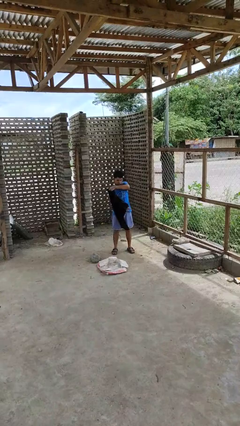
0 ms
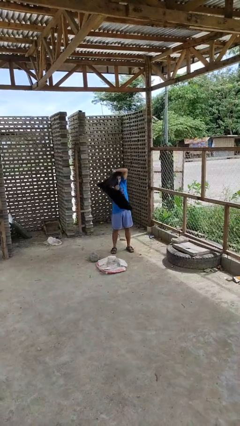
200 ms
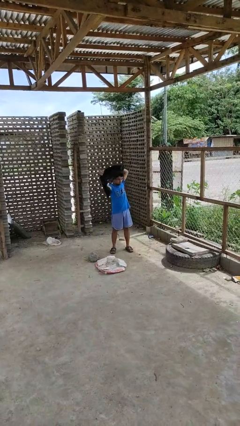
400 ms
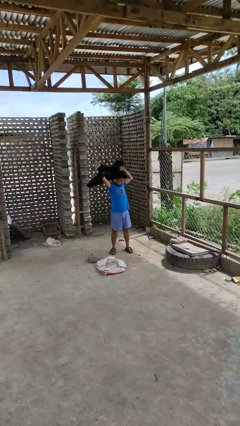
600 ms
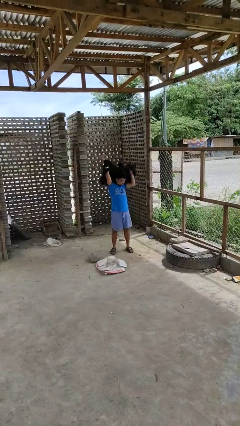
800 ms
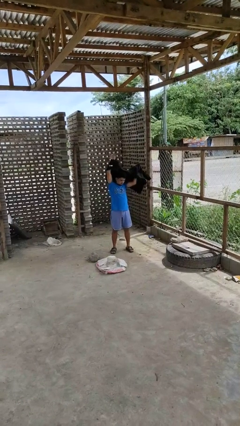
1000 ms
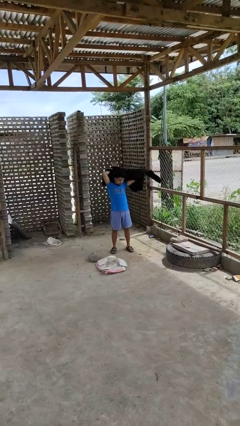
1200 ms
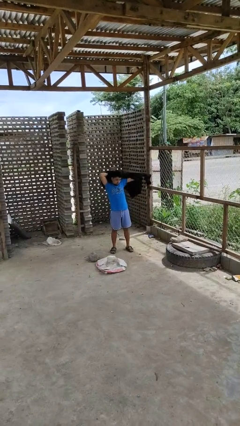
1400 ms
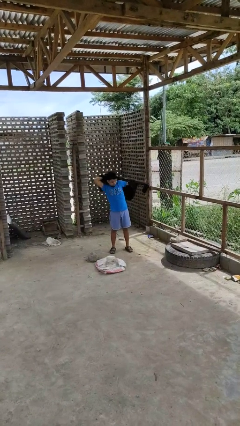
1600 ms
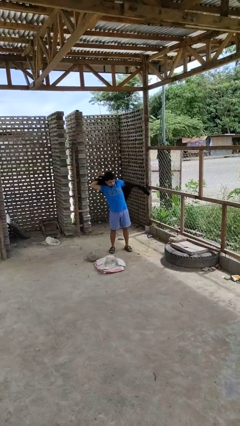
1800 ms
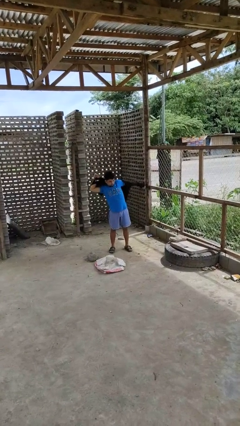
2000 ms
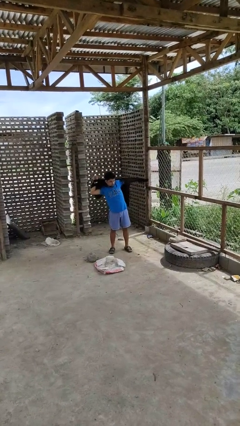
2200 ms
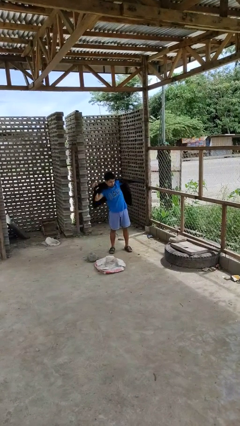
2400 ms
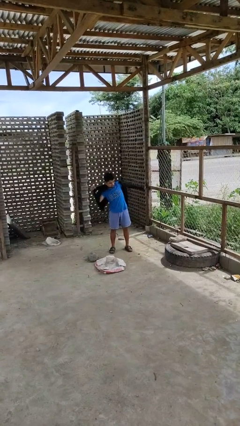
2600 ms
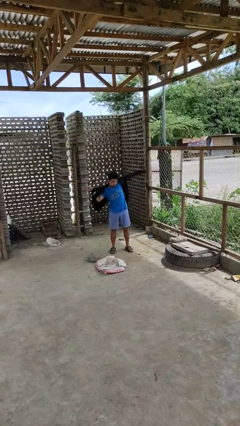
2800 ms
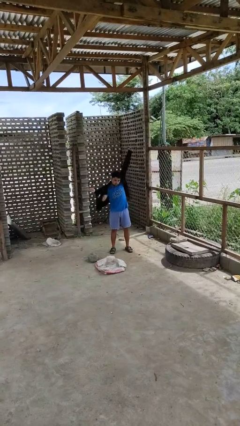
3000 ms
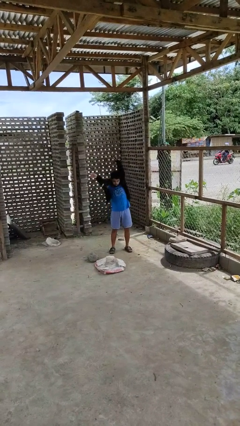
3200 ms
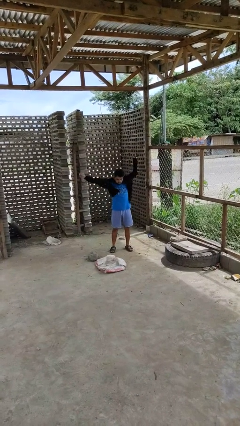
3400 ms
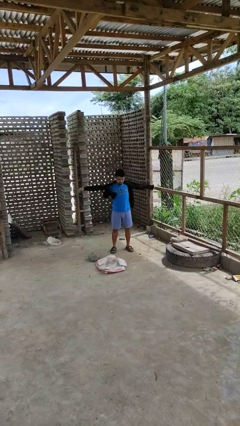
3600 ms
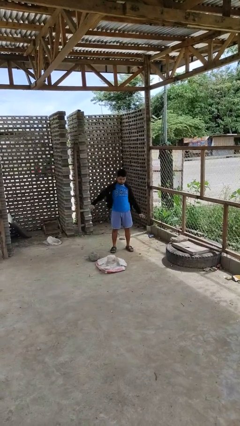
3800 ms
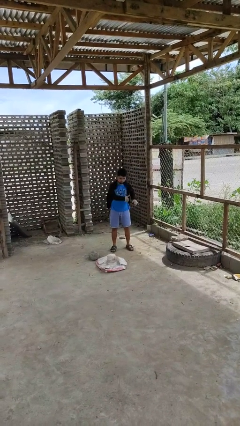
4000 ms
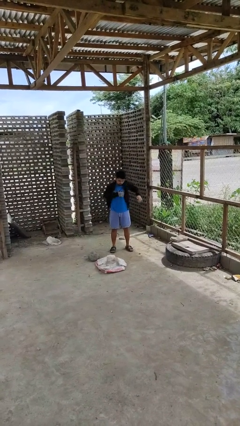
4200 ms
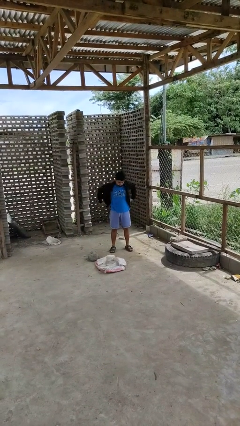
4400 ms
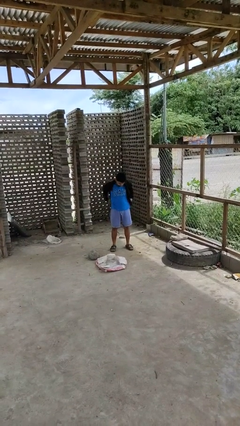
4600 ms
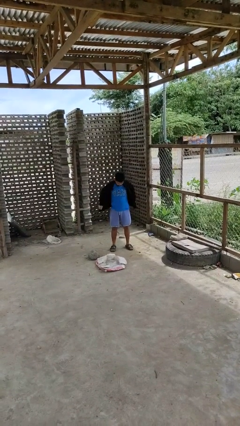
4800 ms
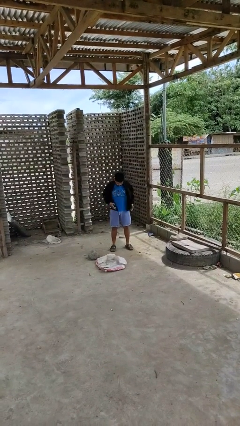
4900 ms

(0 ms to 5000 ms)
person puts on jacket

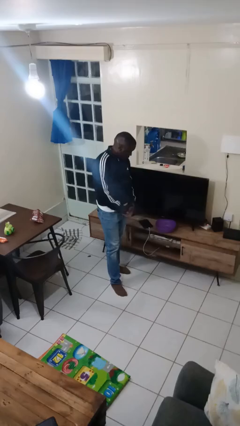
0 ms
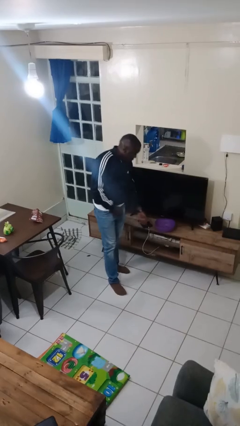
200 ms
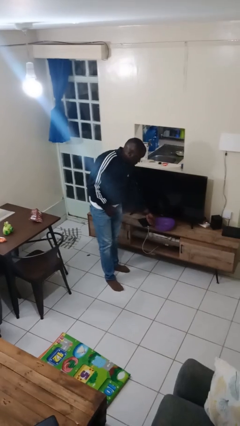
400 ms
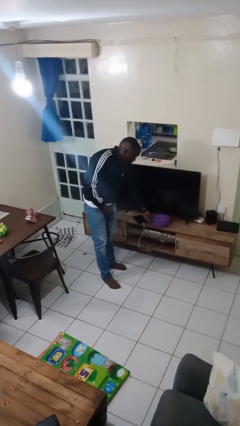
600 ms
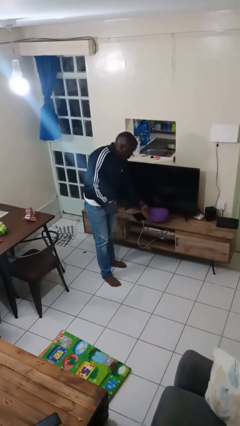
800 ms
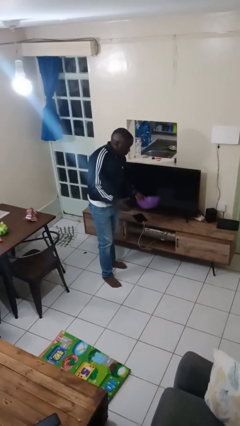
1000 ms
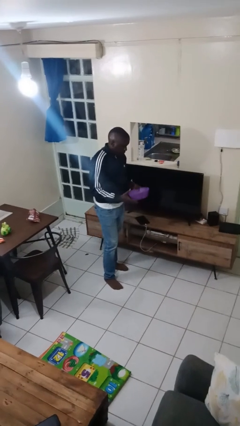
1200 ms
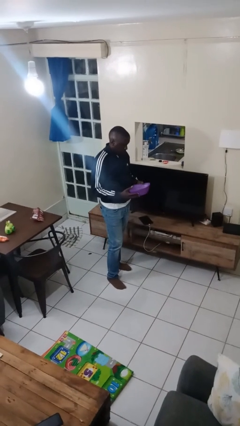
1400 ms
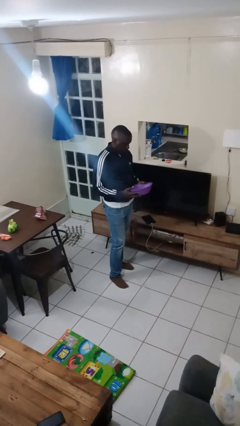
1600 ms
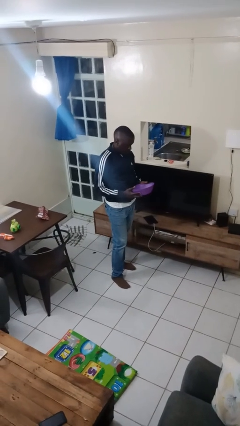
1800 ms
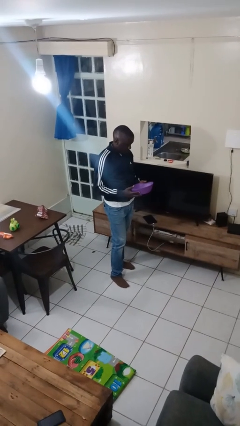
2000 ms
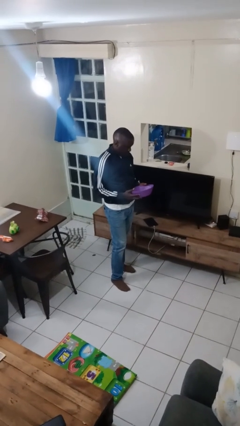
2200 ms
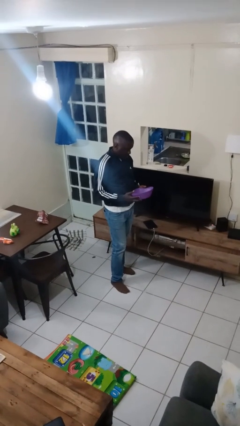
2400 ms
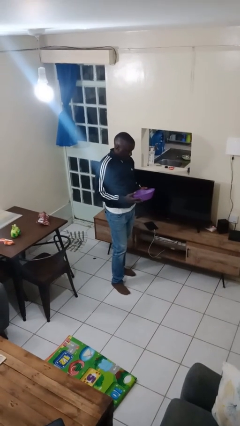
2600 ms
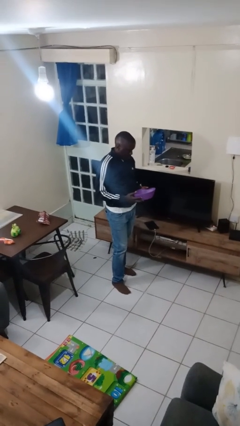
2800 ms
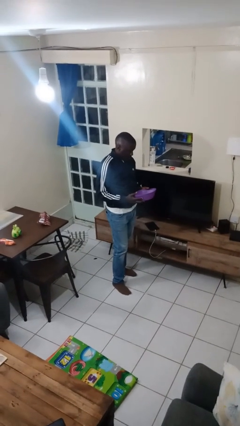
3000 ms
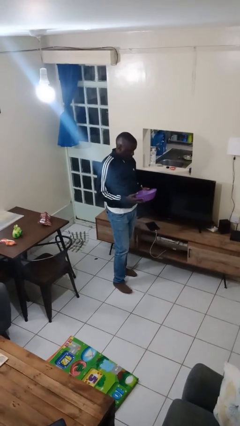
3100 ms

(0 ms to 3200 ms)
person picks up object from countertop

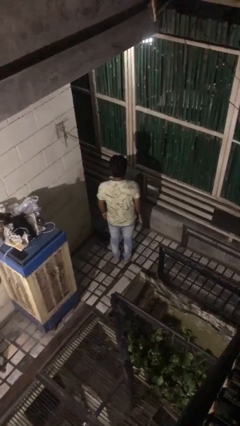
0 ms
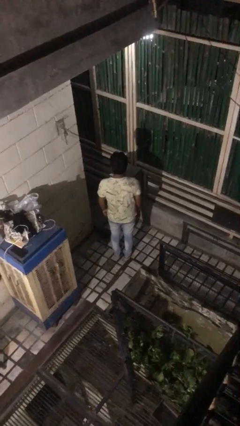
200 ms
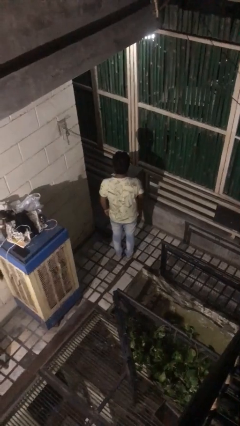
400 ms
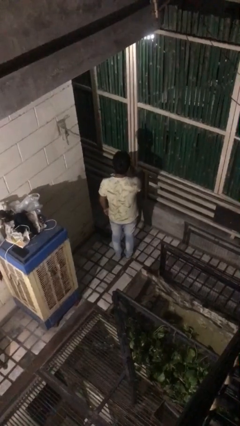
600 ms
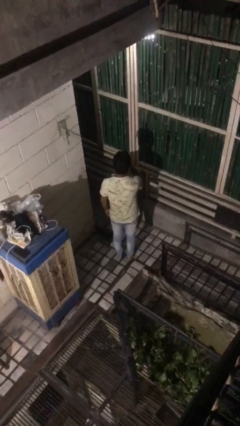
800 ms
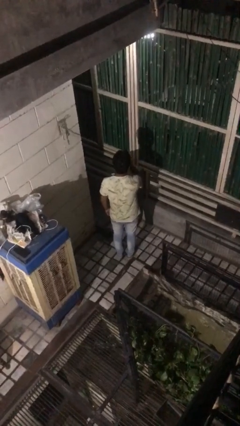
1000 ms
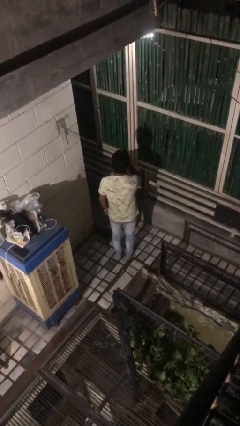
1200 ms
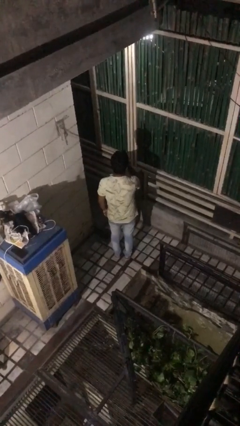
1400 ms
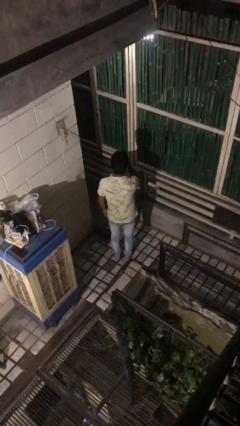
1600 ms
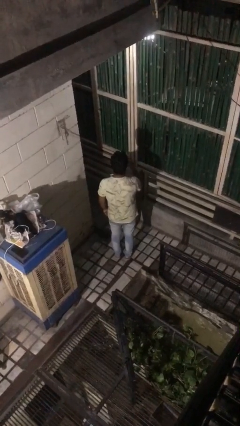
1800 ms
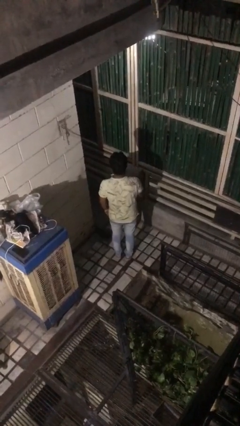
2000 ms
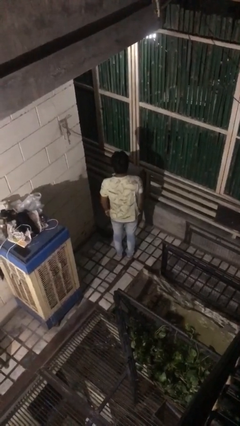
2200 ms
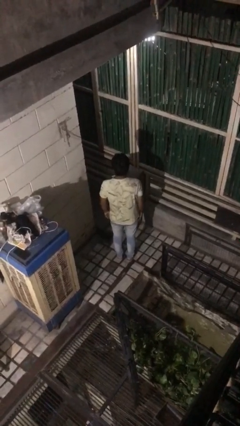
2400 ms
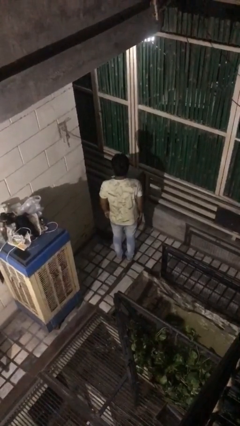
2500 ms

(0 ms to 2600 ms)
person gestures be quiet

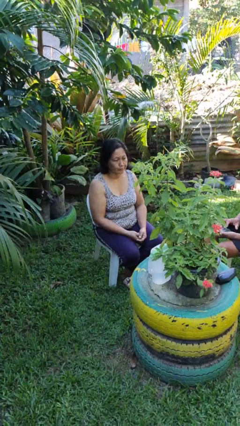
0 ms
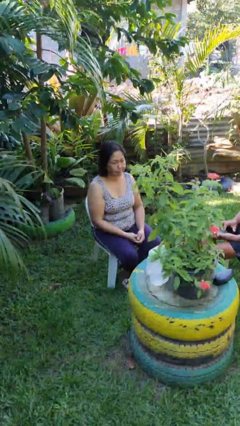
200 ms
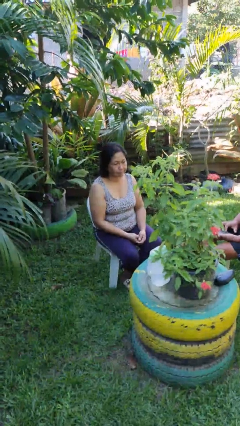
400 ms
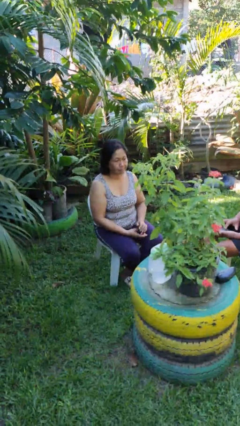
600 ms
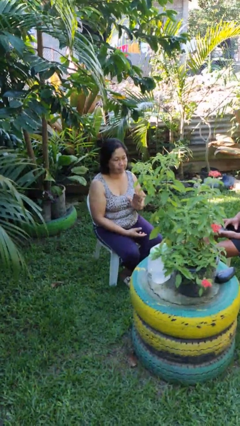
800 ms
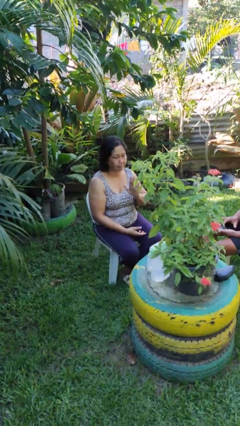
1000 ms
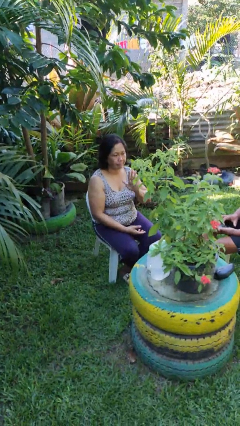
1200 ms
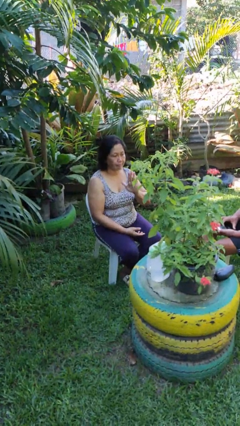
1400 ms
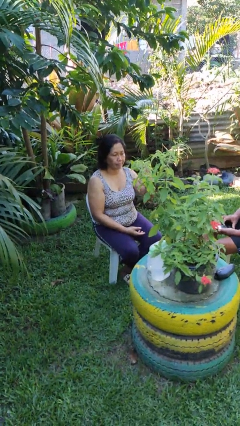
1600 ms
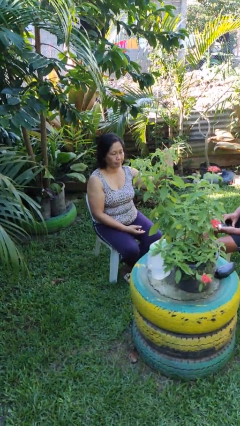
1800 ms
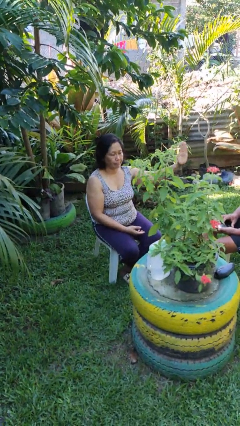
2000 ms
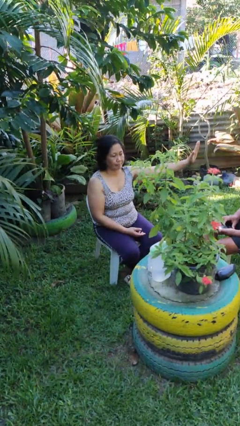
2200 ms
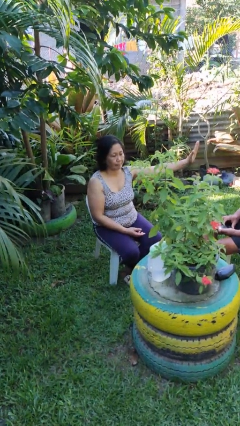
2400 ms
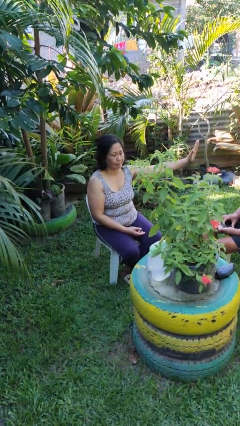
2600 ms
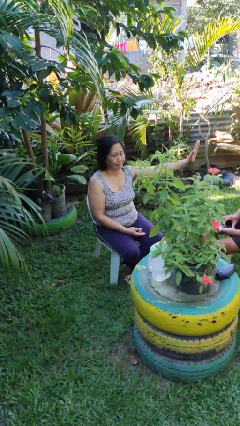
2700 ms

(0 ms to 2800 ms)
person gestures swipe left

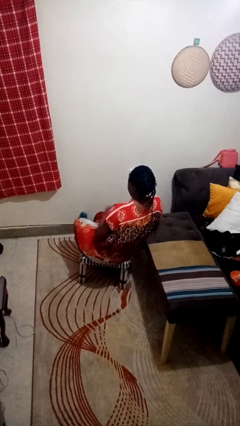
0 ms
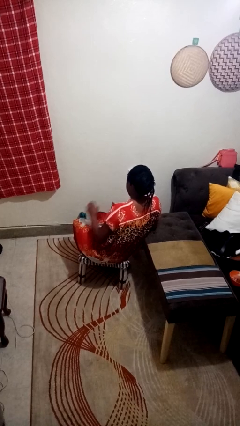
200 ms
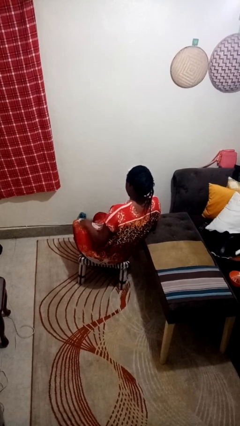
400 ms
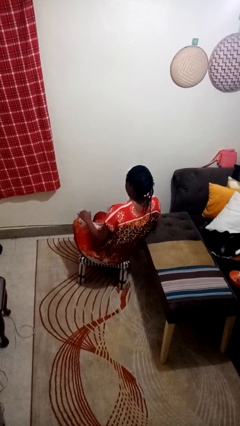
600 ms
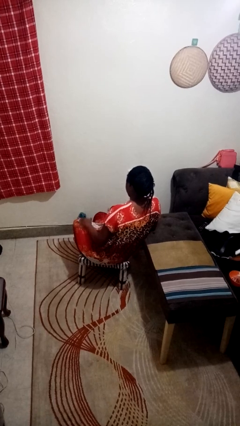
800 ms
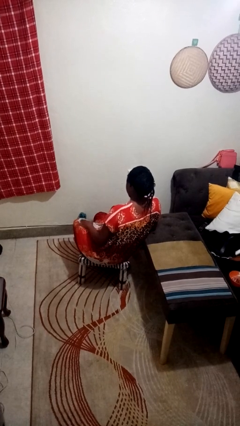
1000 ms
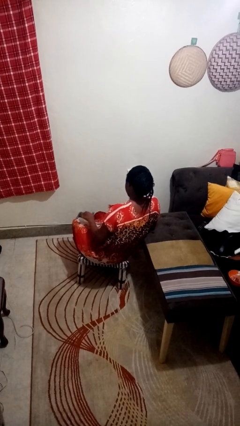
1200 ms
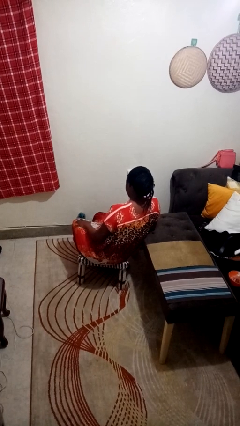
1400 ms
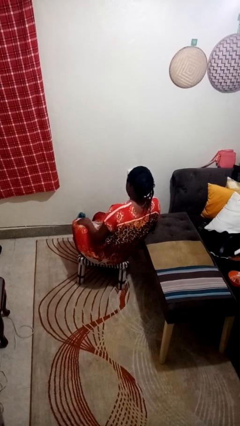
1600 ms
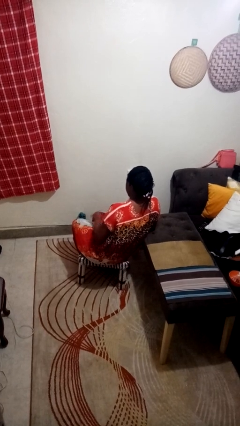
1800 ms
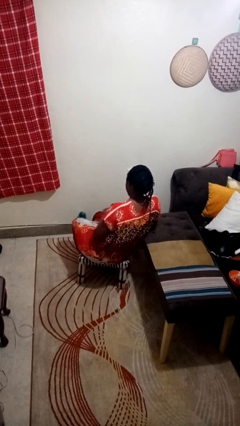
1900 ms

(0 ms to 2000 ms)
person slaps hands on thighs

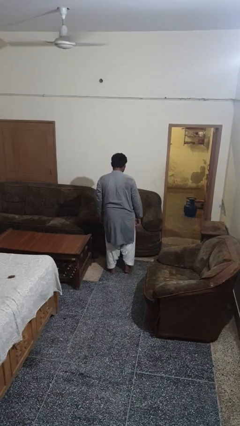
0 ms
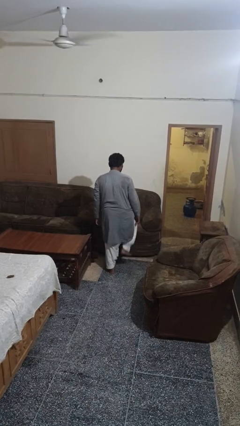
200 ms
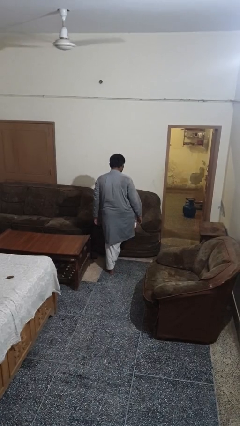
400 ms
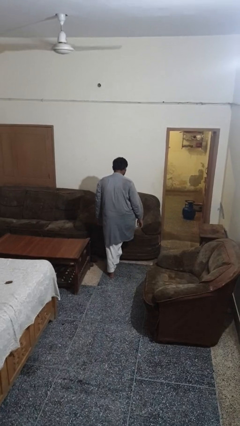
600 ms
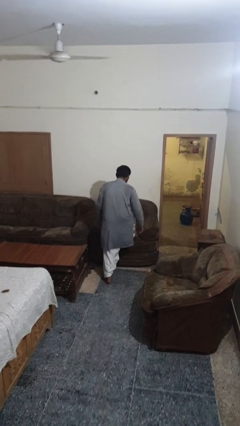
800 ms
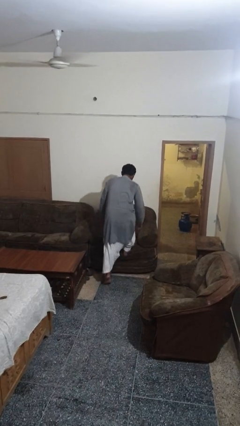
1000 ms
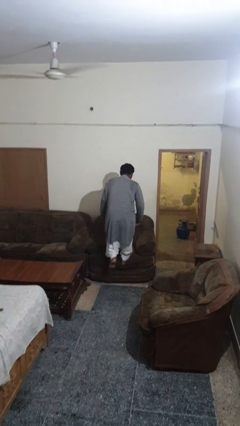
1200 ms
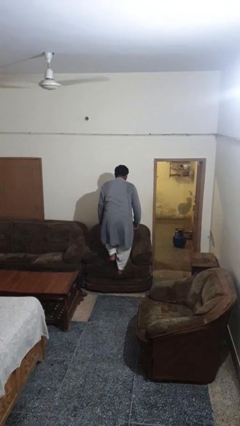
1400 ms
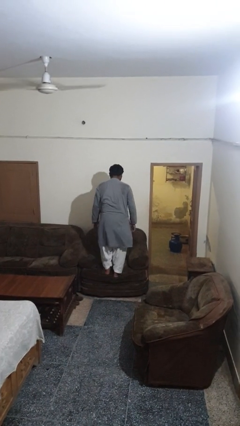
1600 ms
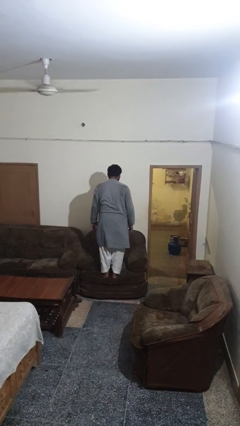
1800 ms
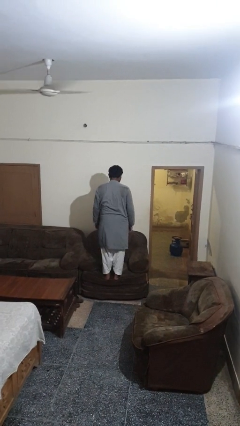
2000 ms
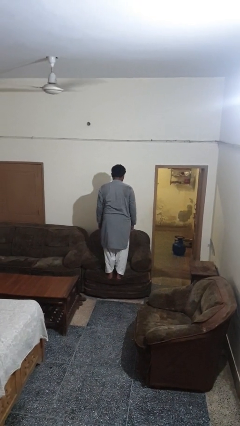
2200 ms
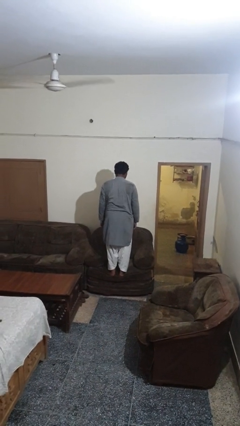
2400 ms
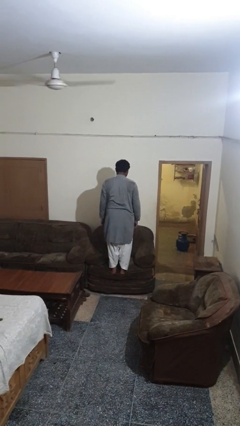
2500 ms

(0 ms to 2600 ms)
person climbs on couch
